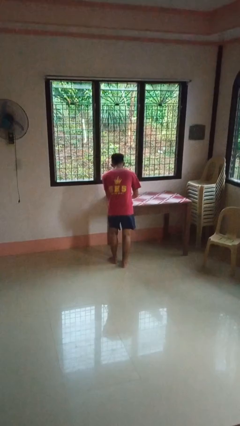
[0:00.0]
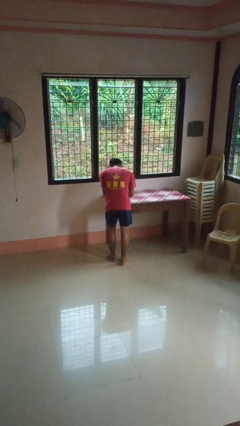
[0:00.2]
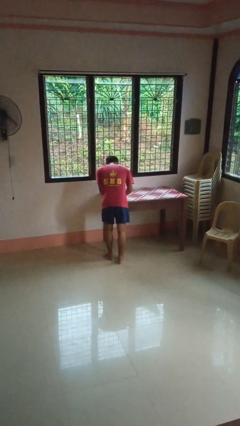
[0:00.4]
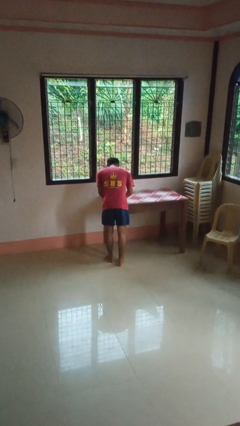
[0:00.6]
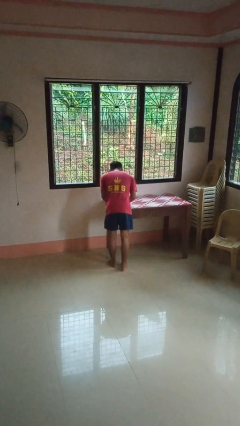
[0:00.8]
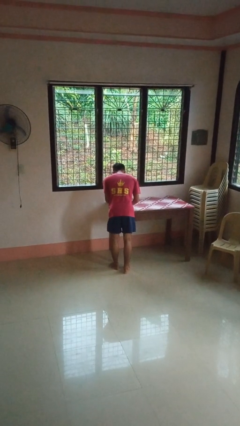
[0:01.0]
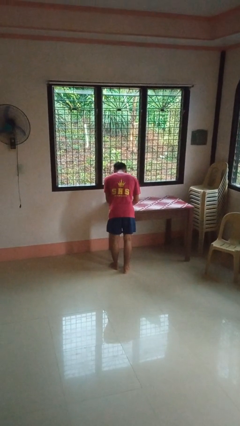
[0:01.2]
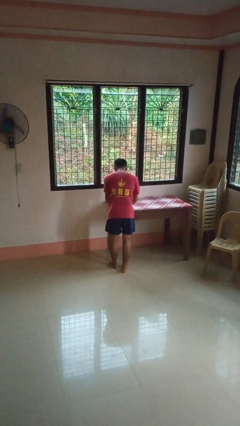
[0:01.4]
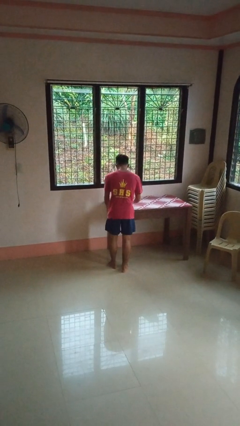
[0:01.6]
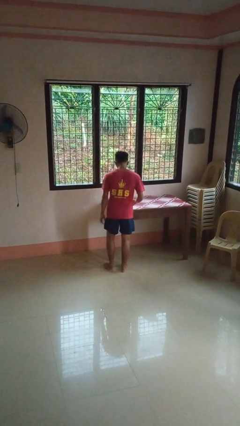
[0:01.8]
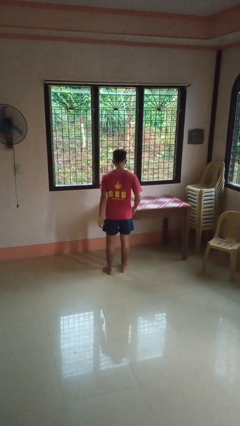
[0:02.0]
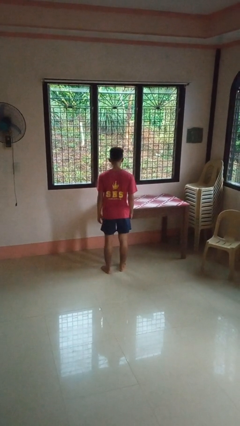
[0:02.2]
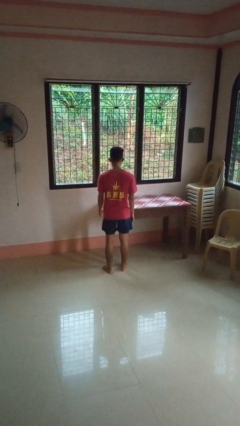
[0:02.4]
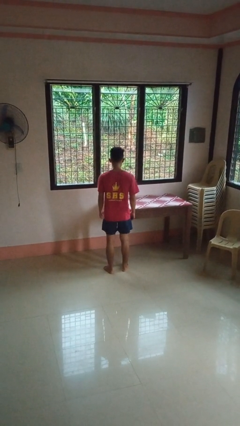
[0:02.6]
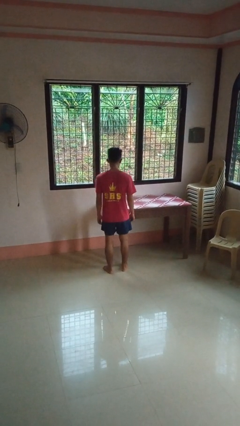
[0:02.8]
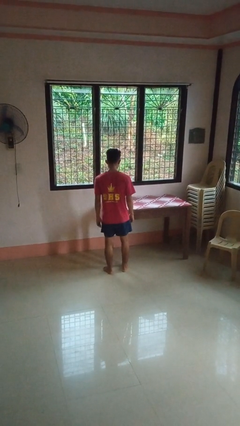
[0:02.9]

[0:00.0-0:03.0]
person bumps into table

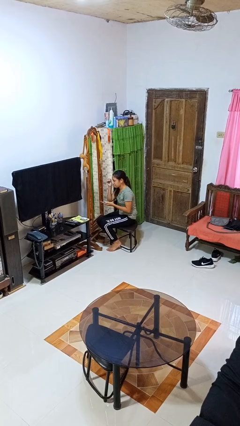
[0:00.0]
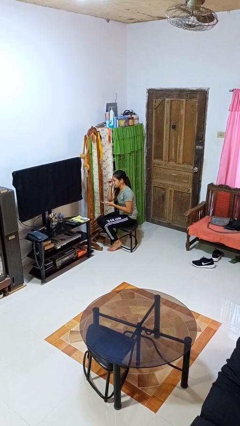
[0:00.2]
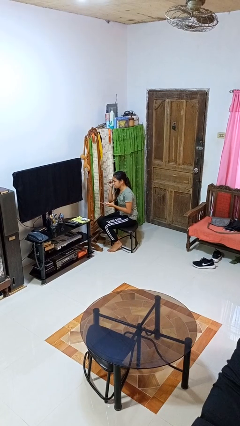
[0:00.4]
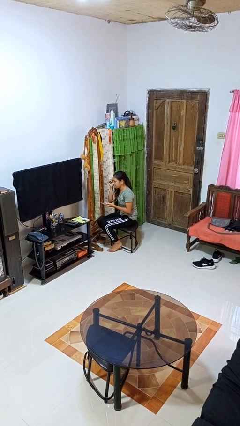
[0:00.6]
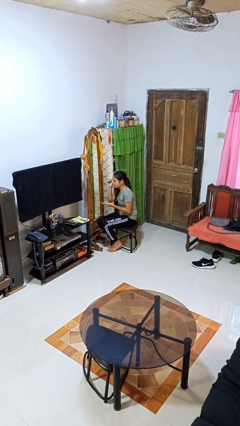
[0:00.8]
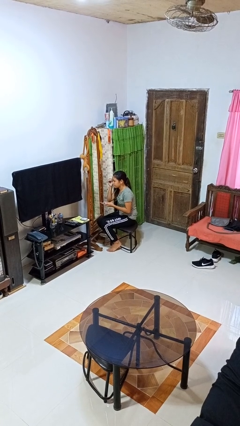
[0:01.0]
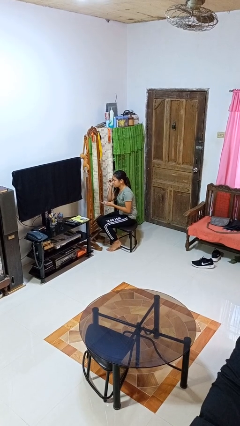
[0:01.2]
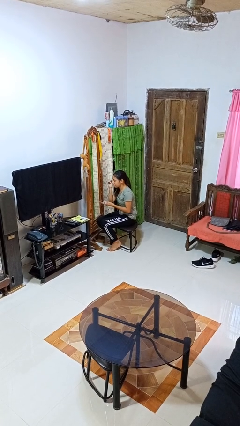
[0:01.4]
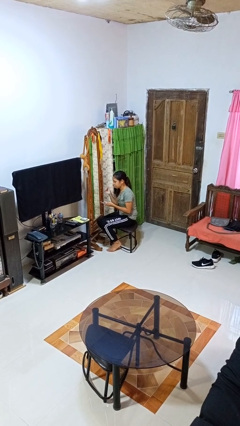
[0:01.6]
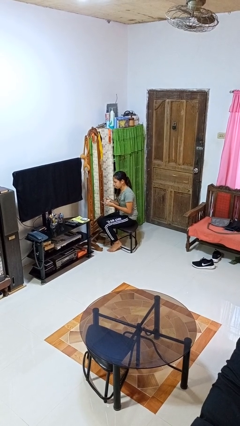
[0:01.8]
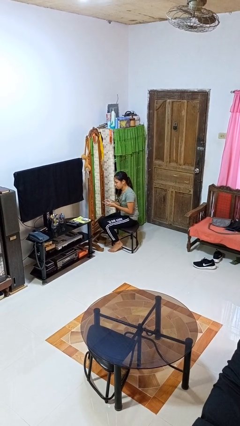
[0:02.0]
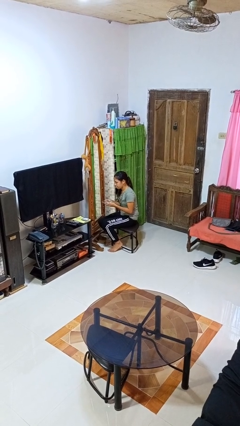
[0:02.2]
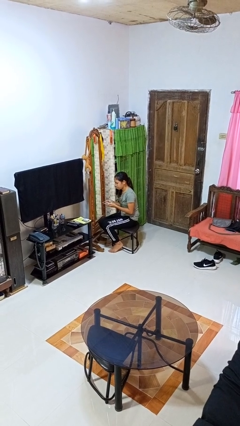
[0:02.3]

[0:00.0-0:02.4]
person applies eye makeup

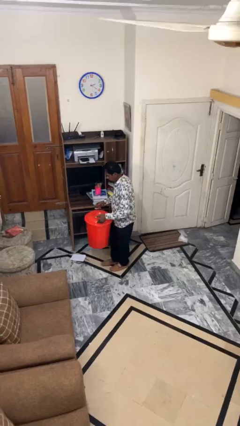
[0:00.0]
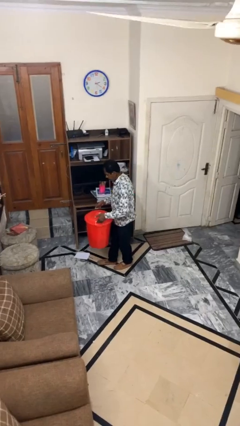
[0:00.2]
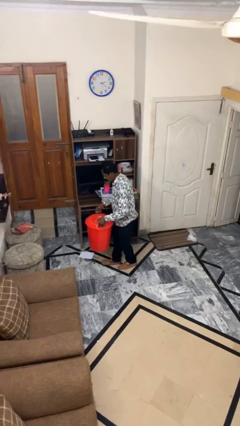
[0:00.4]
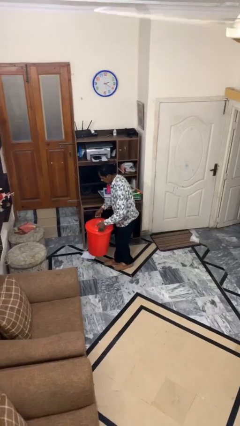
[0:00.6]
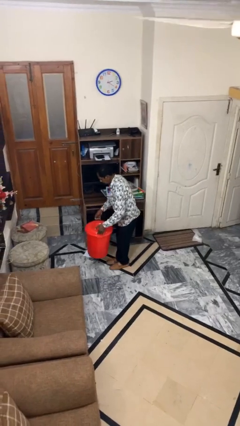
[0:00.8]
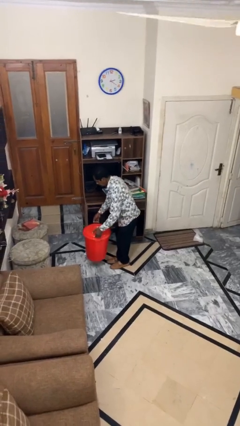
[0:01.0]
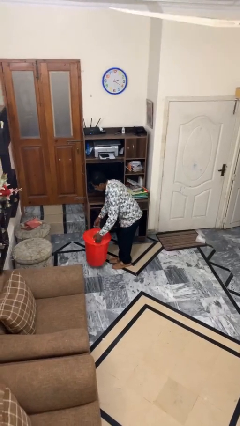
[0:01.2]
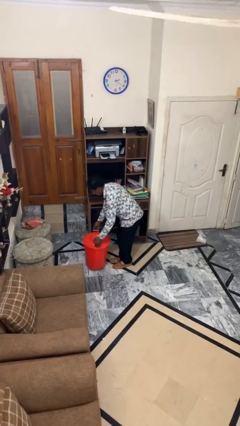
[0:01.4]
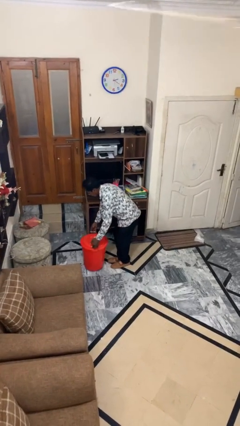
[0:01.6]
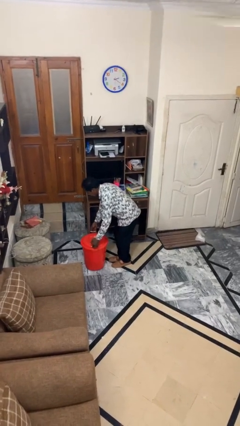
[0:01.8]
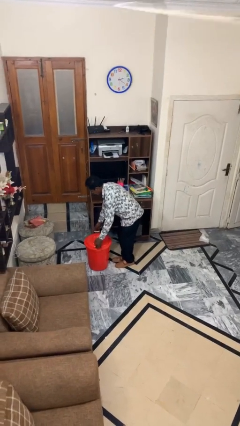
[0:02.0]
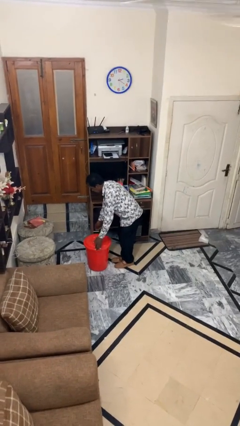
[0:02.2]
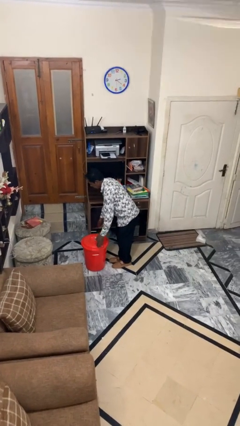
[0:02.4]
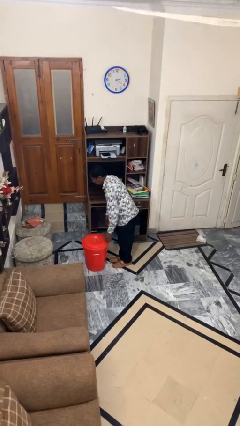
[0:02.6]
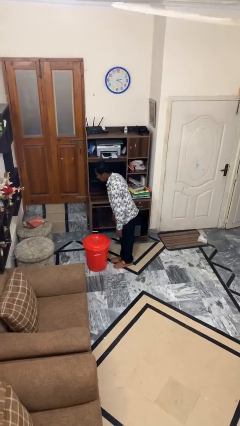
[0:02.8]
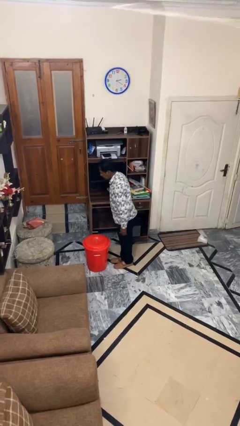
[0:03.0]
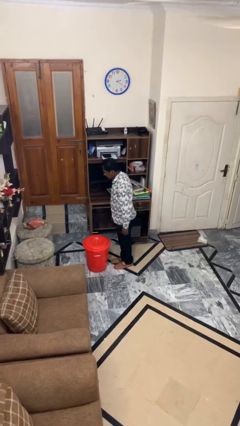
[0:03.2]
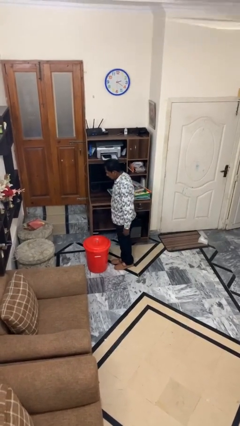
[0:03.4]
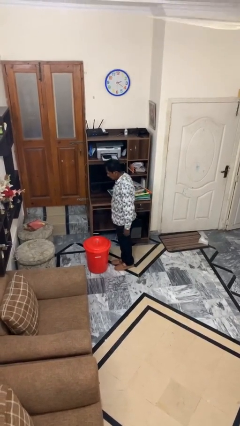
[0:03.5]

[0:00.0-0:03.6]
person puts down object on floor

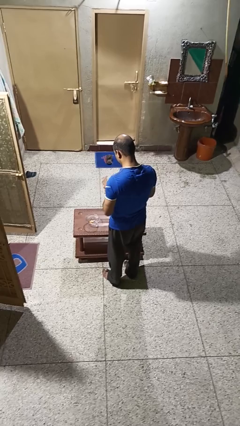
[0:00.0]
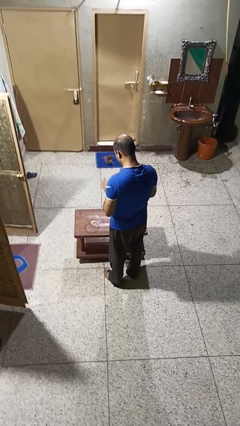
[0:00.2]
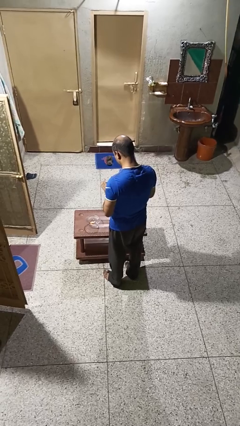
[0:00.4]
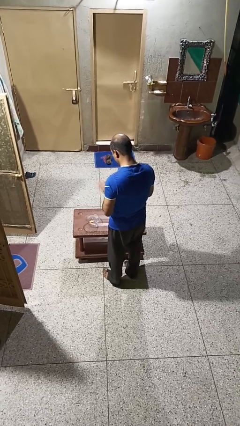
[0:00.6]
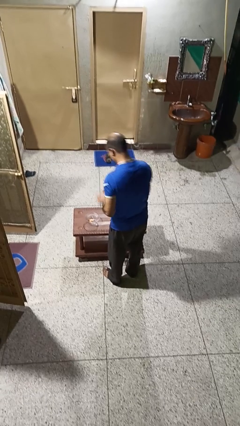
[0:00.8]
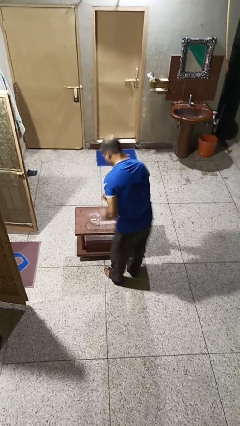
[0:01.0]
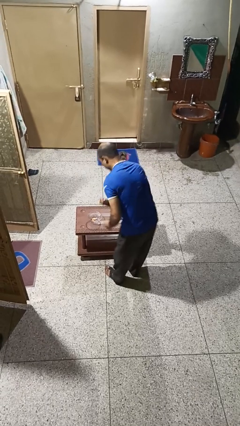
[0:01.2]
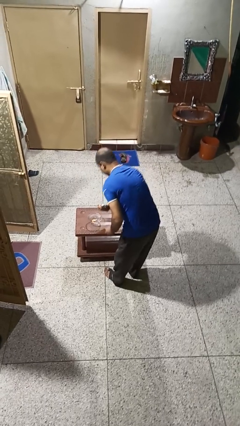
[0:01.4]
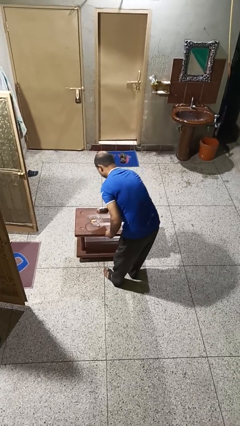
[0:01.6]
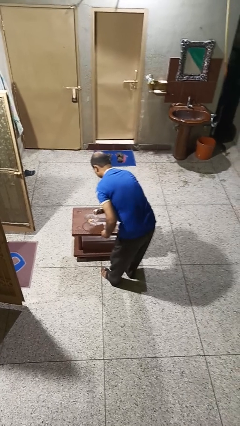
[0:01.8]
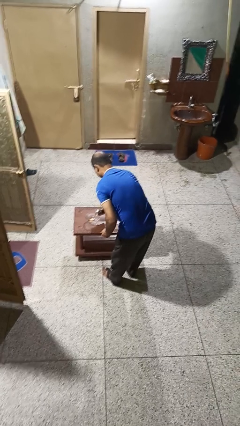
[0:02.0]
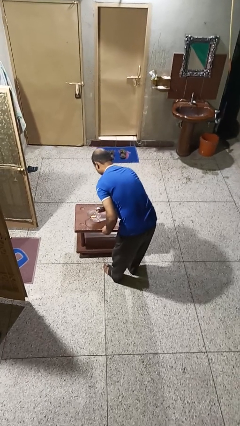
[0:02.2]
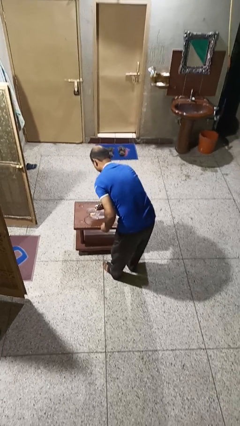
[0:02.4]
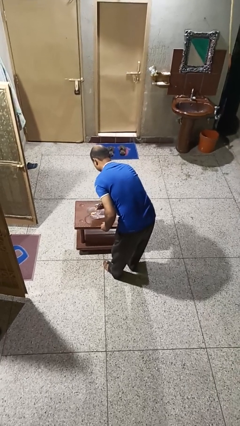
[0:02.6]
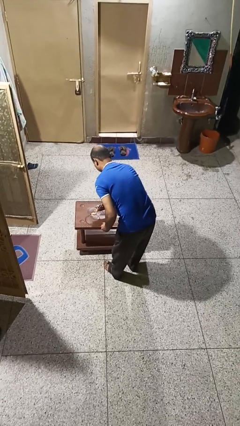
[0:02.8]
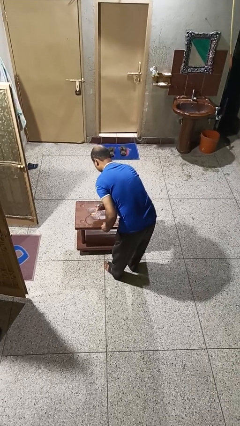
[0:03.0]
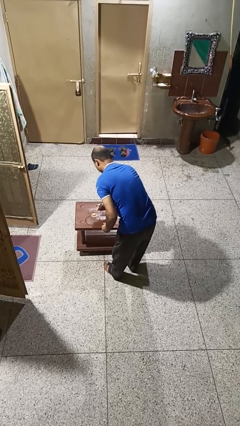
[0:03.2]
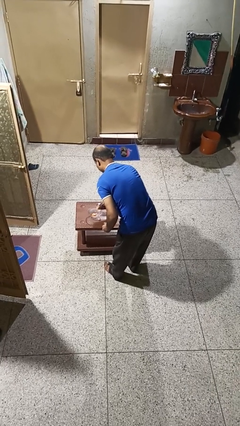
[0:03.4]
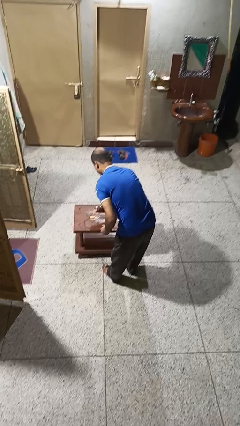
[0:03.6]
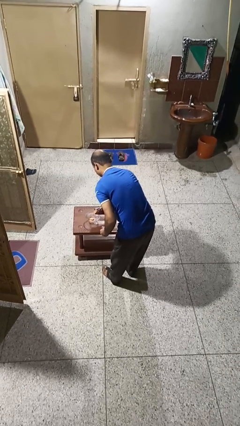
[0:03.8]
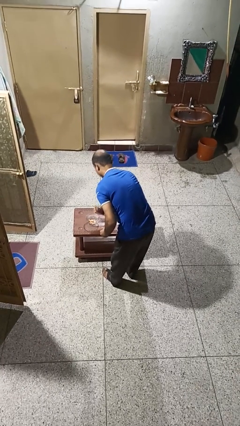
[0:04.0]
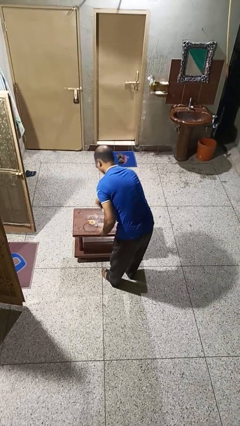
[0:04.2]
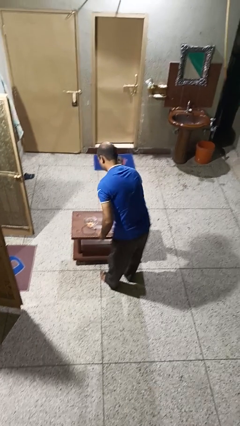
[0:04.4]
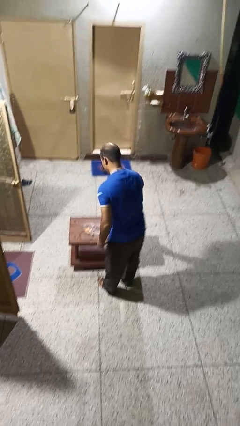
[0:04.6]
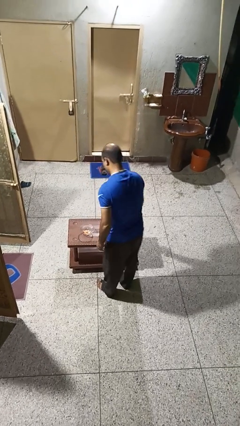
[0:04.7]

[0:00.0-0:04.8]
person pours into bowl

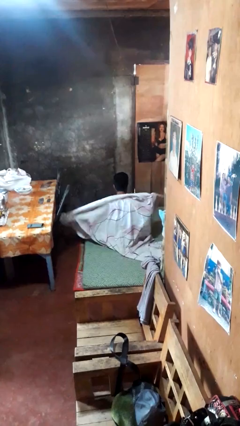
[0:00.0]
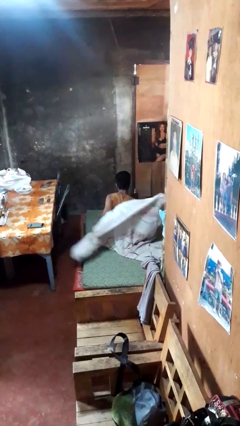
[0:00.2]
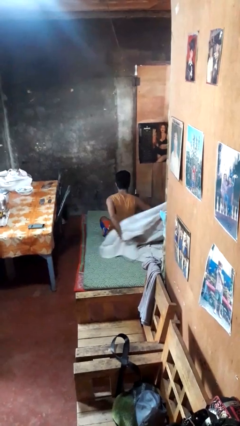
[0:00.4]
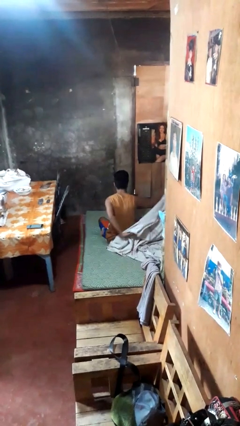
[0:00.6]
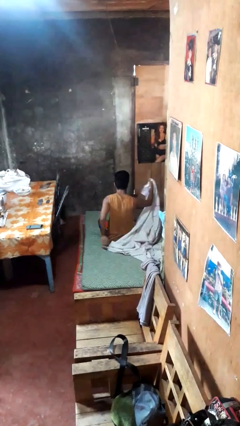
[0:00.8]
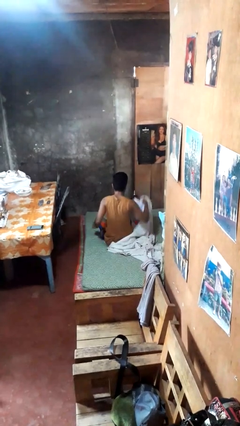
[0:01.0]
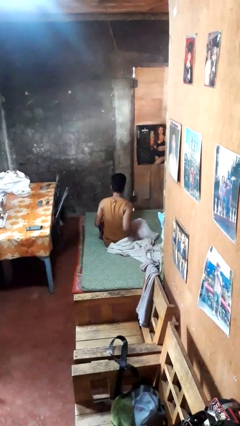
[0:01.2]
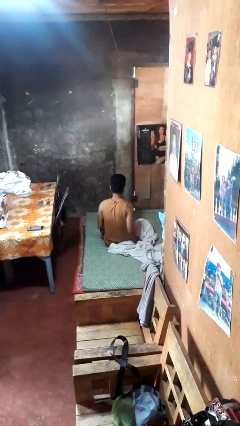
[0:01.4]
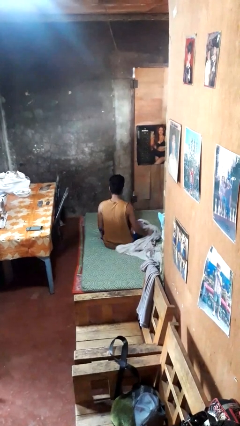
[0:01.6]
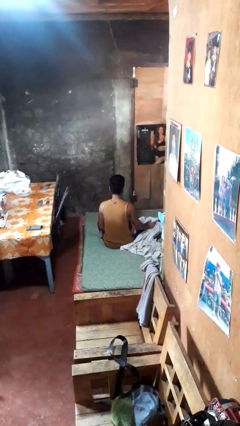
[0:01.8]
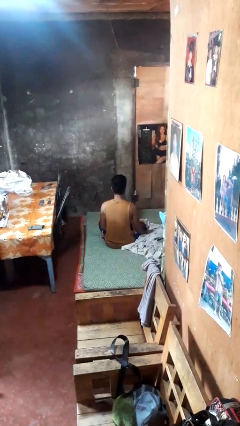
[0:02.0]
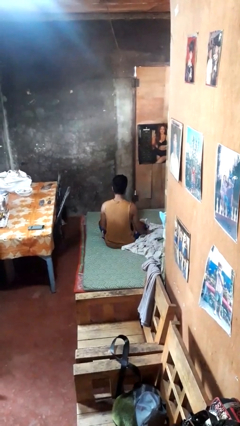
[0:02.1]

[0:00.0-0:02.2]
person uncovers with blanket

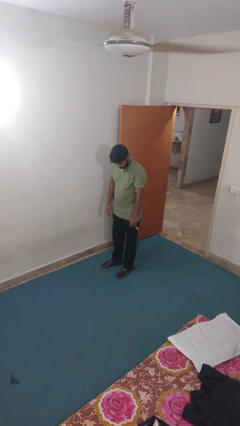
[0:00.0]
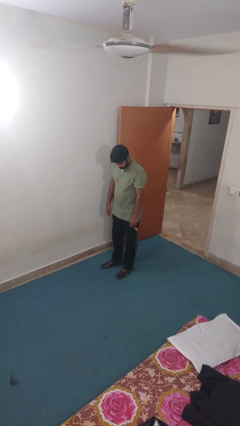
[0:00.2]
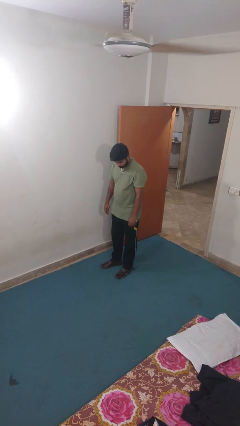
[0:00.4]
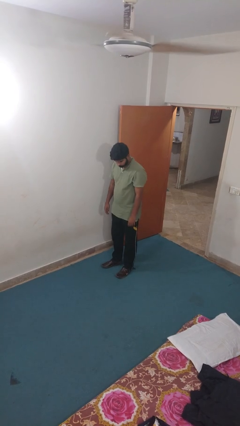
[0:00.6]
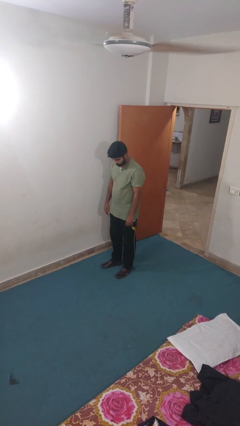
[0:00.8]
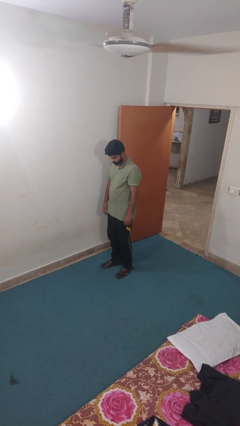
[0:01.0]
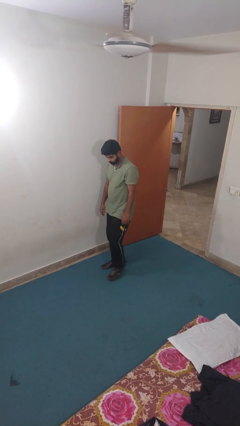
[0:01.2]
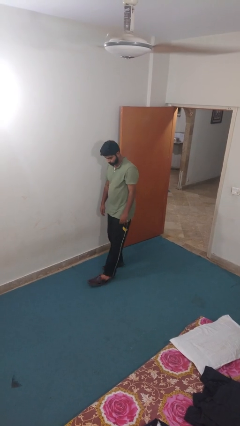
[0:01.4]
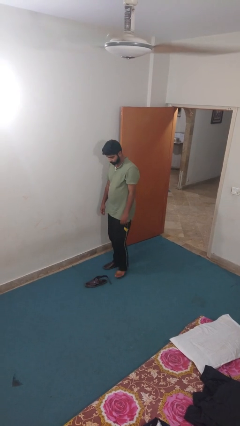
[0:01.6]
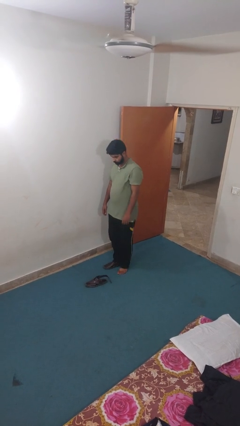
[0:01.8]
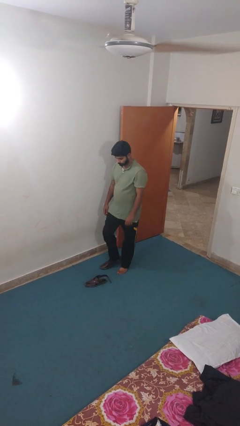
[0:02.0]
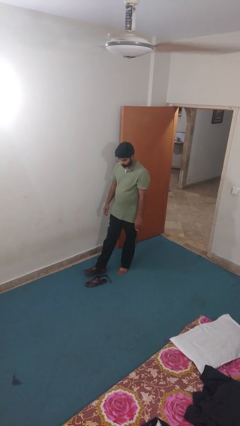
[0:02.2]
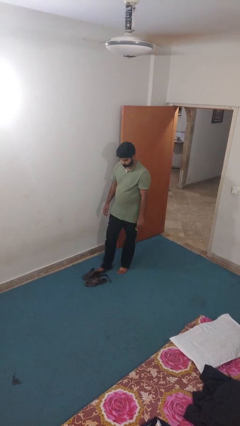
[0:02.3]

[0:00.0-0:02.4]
person takes off shoes
